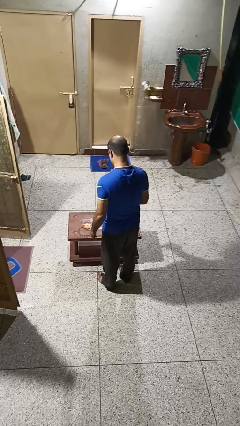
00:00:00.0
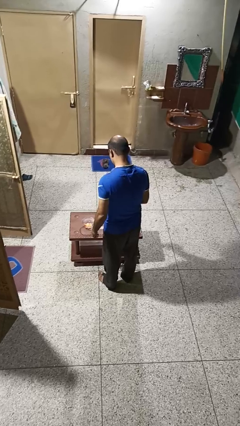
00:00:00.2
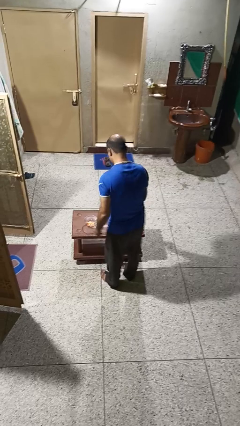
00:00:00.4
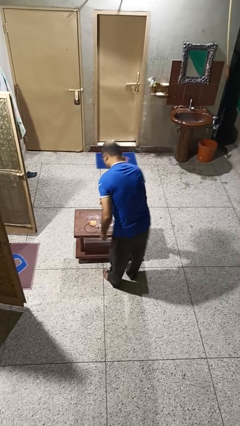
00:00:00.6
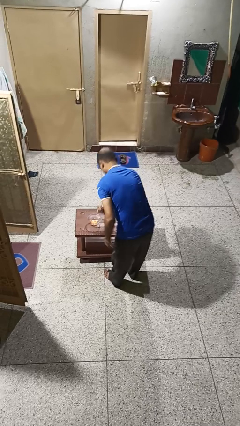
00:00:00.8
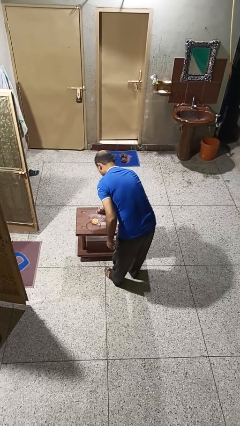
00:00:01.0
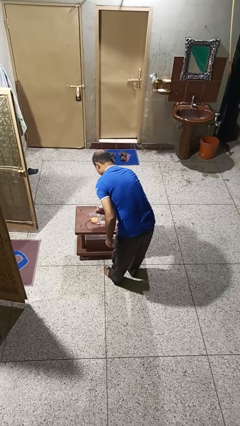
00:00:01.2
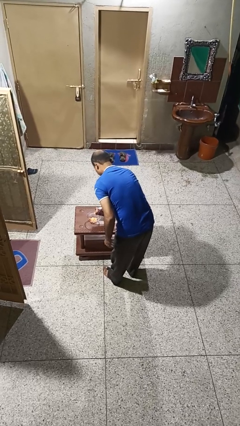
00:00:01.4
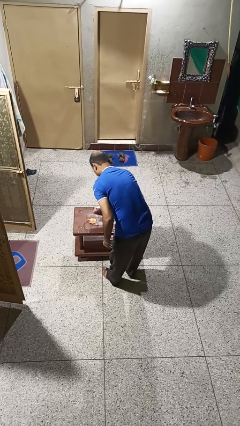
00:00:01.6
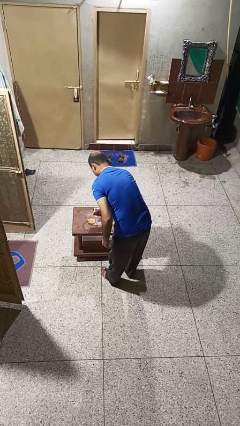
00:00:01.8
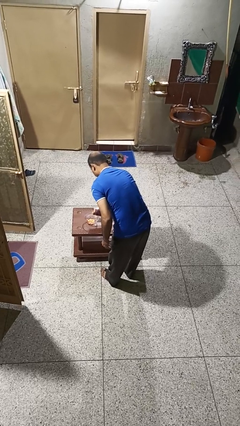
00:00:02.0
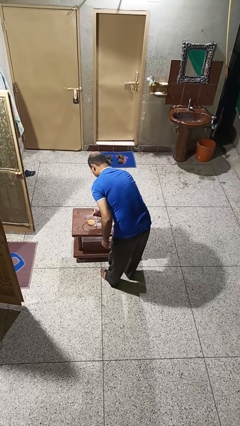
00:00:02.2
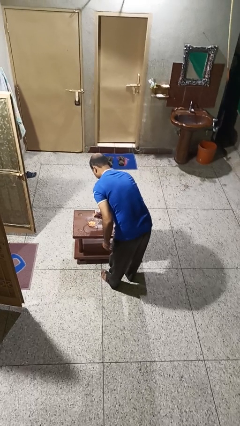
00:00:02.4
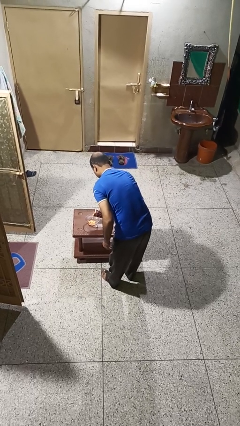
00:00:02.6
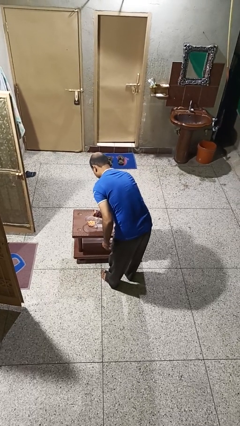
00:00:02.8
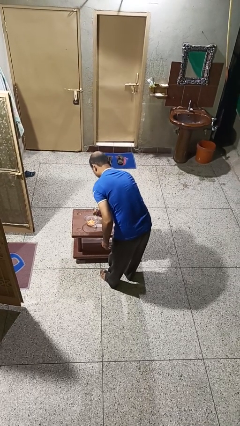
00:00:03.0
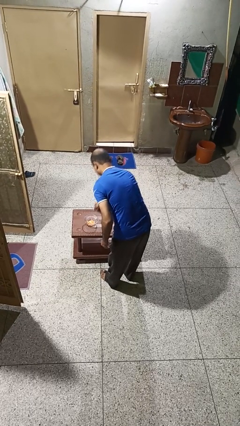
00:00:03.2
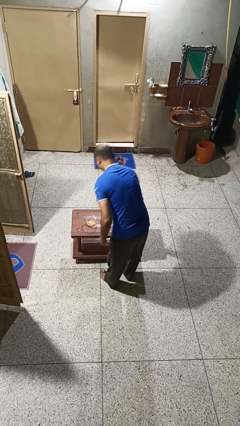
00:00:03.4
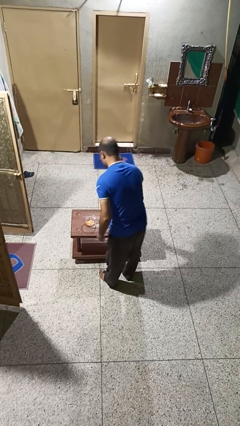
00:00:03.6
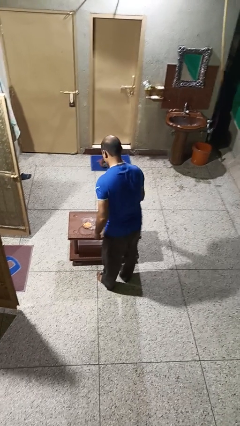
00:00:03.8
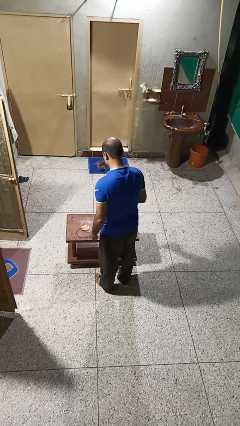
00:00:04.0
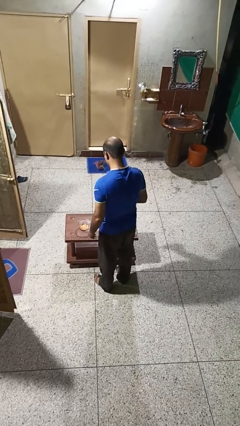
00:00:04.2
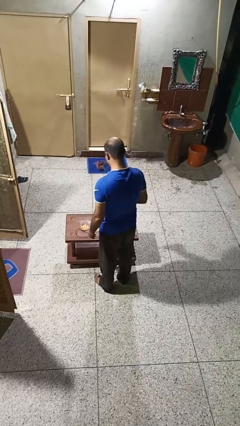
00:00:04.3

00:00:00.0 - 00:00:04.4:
person pours into bowl

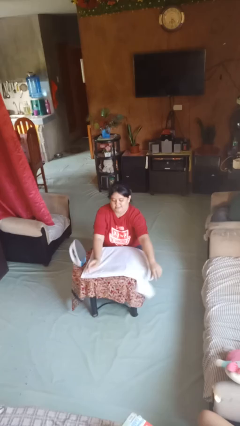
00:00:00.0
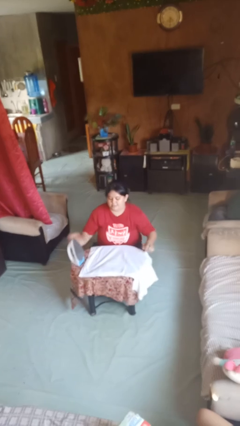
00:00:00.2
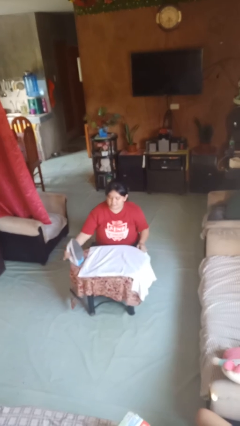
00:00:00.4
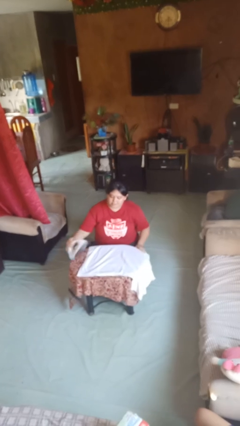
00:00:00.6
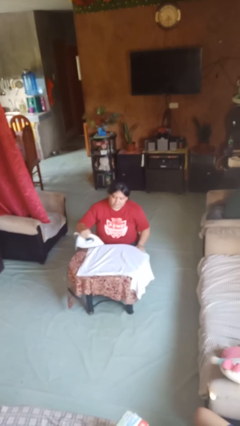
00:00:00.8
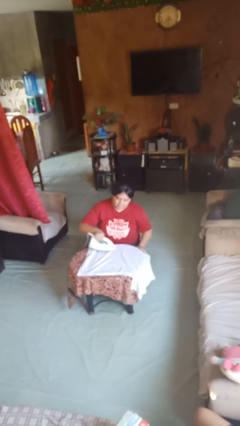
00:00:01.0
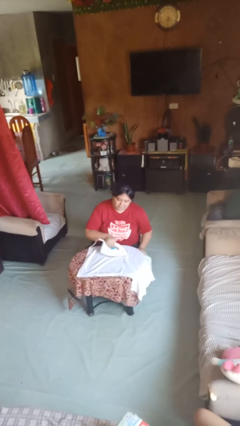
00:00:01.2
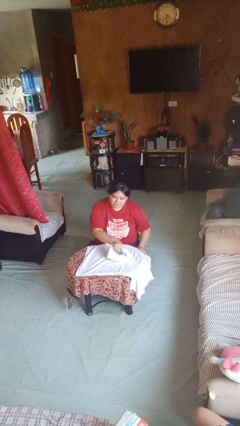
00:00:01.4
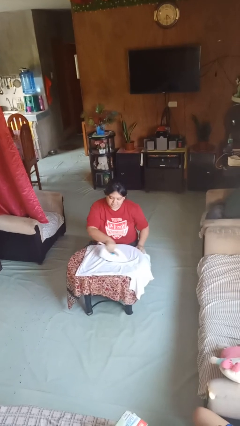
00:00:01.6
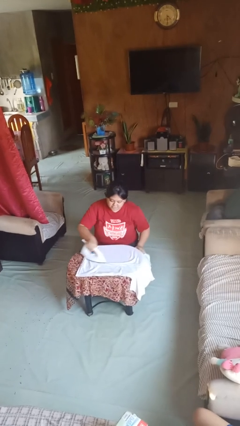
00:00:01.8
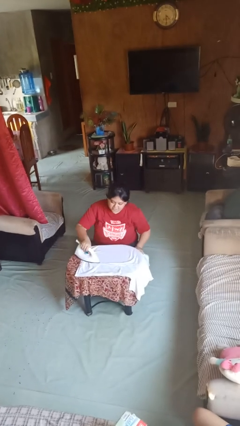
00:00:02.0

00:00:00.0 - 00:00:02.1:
person irons clothes

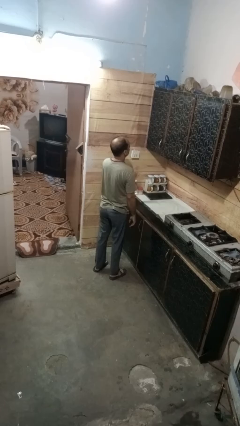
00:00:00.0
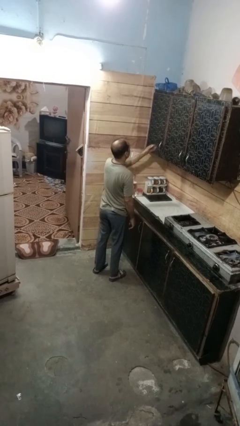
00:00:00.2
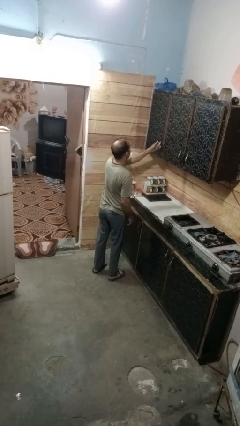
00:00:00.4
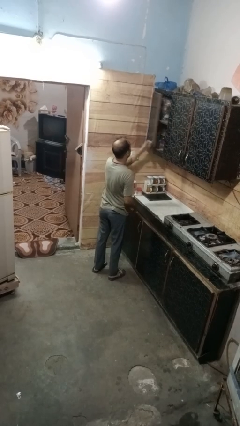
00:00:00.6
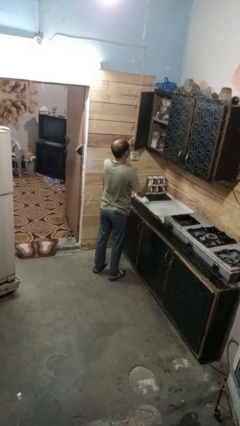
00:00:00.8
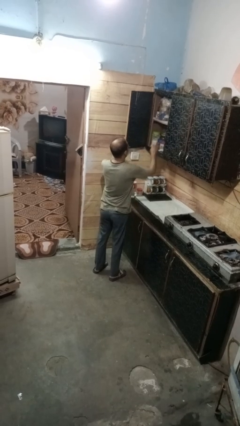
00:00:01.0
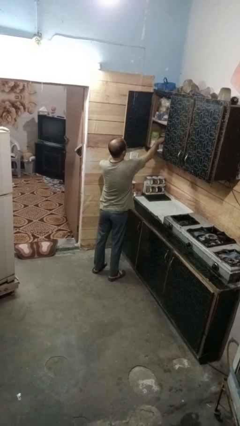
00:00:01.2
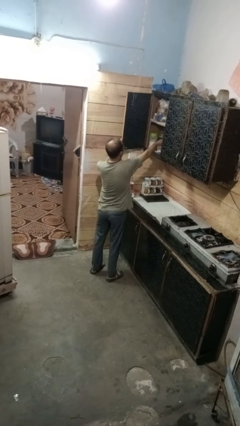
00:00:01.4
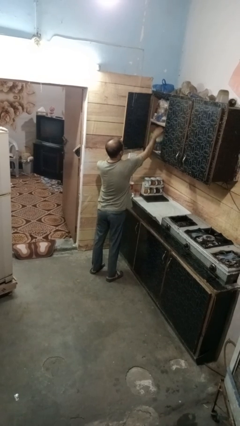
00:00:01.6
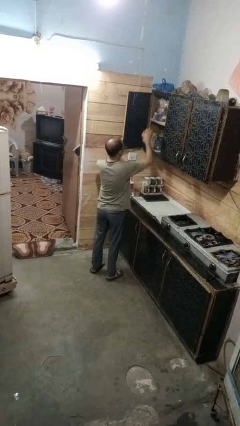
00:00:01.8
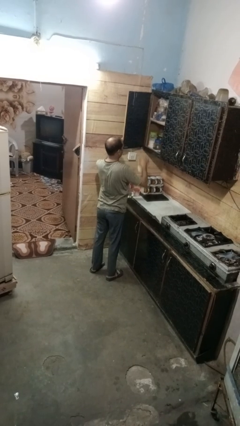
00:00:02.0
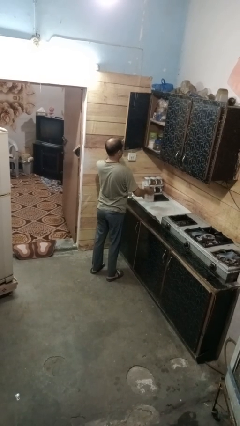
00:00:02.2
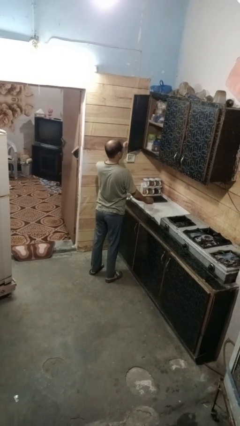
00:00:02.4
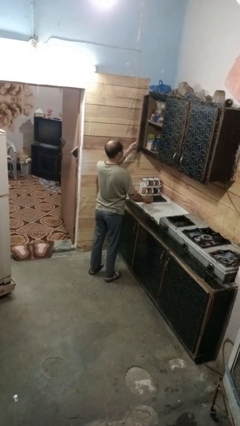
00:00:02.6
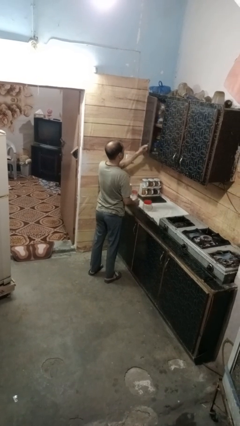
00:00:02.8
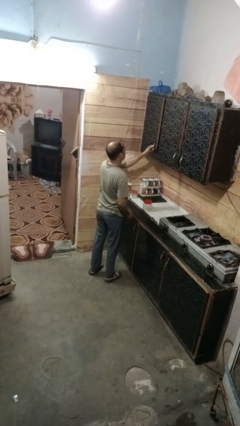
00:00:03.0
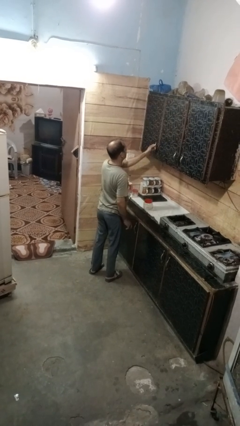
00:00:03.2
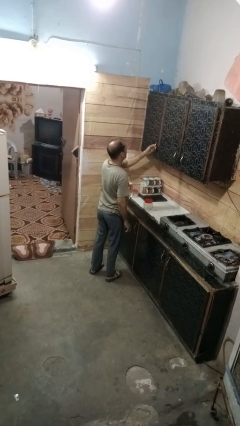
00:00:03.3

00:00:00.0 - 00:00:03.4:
person takes object from cabinet

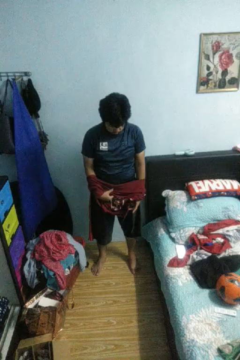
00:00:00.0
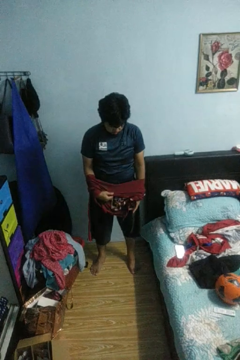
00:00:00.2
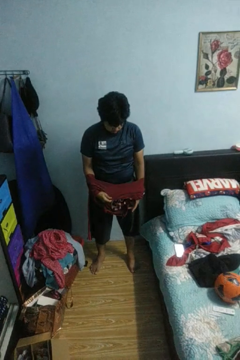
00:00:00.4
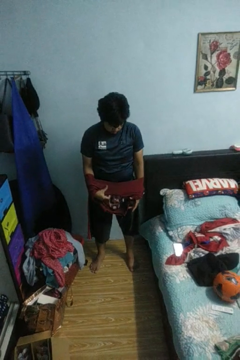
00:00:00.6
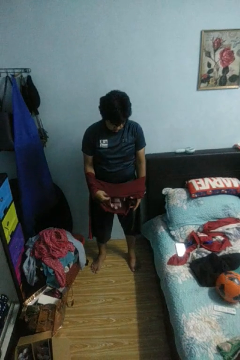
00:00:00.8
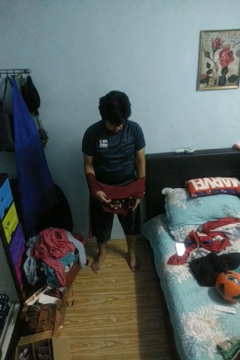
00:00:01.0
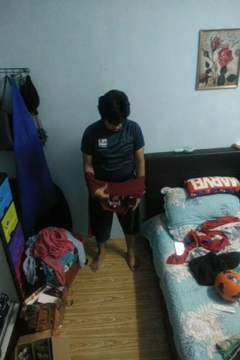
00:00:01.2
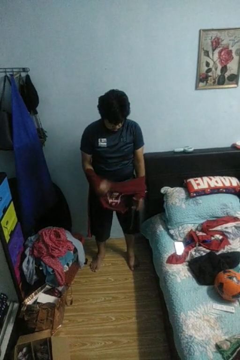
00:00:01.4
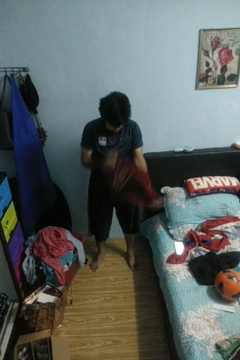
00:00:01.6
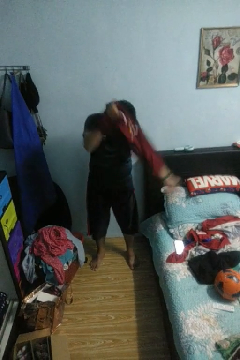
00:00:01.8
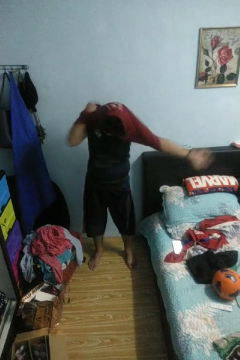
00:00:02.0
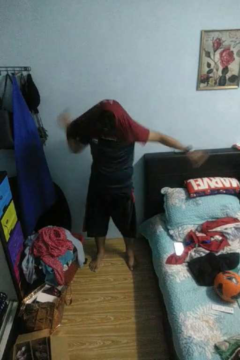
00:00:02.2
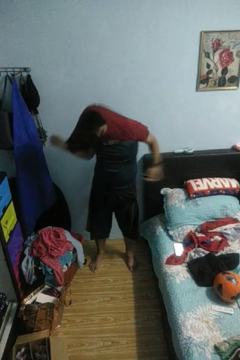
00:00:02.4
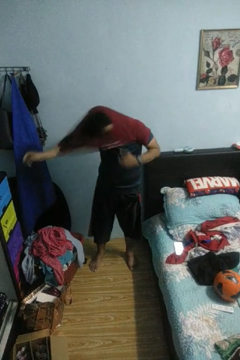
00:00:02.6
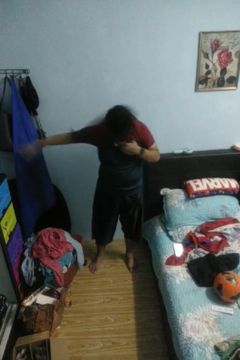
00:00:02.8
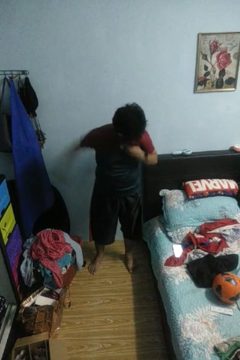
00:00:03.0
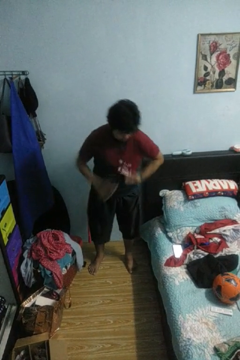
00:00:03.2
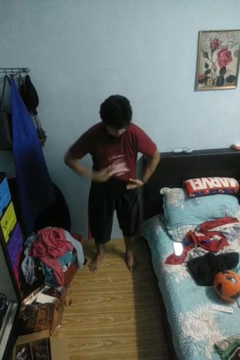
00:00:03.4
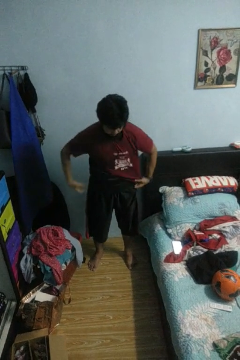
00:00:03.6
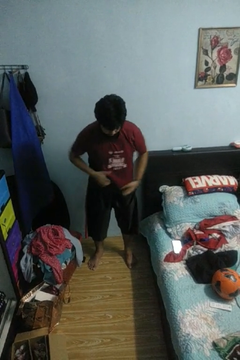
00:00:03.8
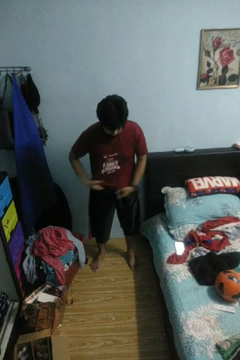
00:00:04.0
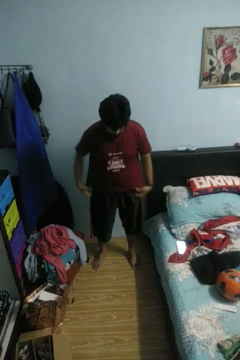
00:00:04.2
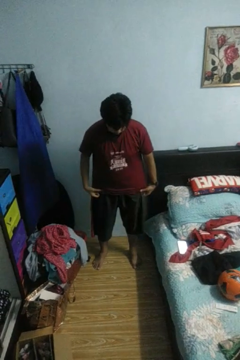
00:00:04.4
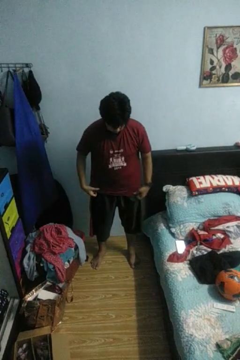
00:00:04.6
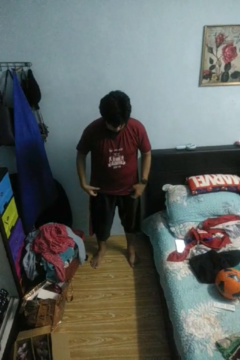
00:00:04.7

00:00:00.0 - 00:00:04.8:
person puts on shirt

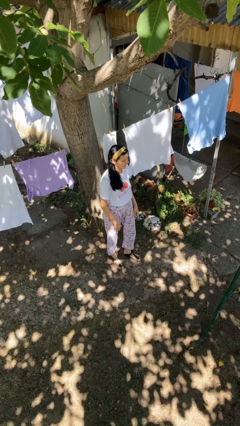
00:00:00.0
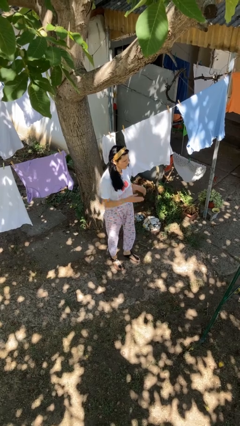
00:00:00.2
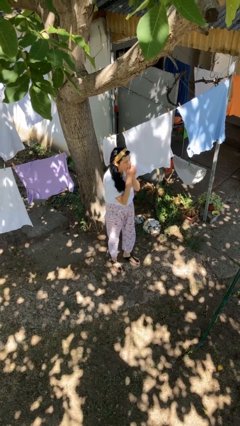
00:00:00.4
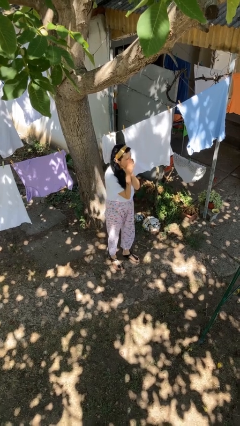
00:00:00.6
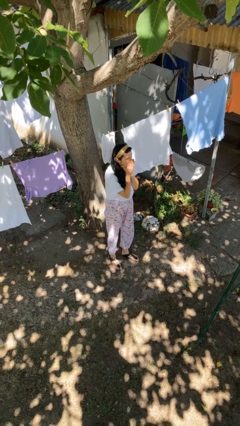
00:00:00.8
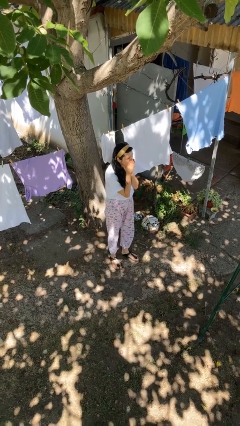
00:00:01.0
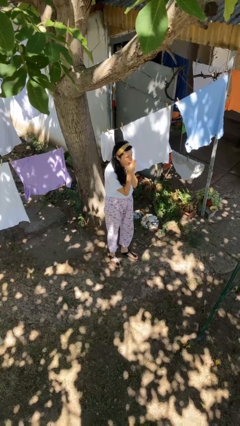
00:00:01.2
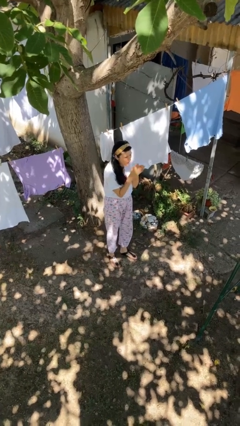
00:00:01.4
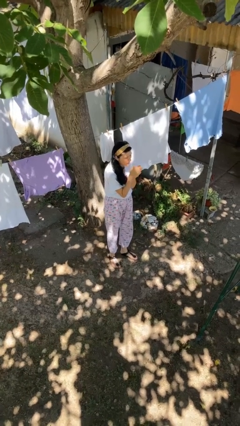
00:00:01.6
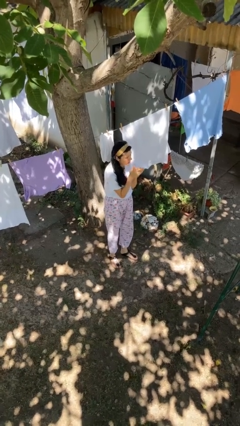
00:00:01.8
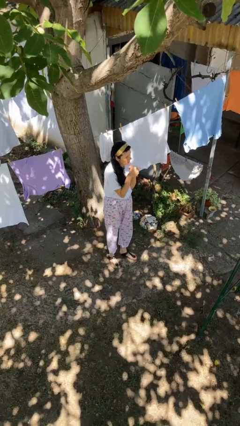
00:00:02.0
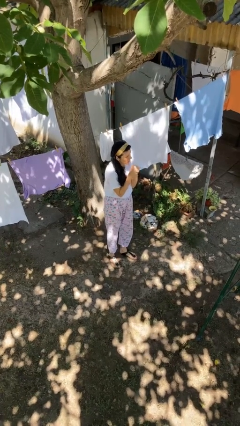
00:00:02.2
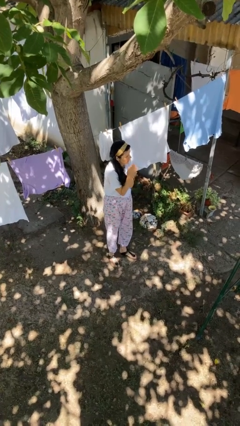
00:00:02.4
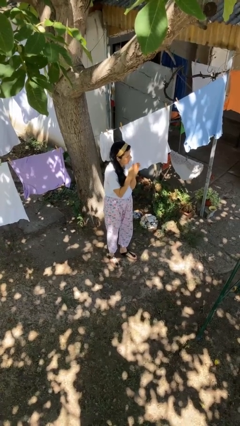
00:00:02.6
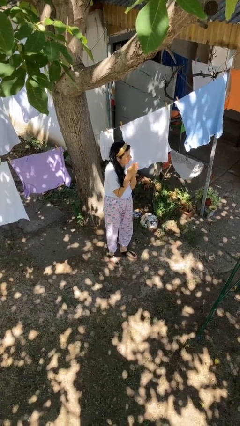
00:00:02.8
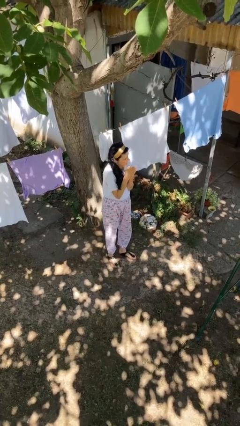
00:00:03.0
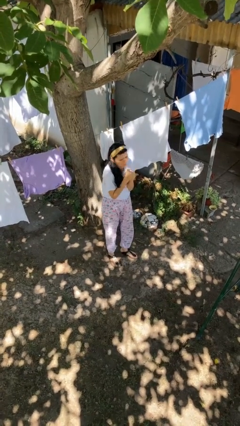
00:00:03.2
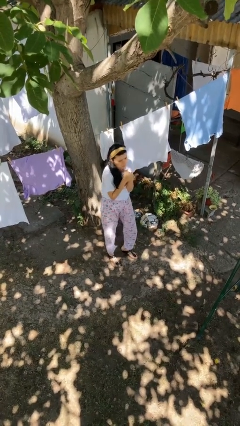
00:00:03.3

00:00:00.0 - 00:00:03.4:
person blows into hands

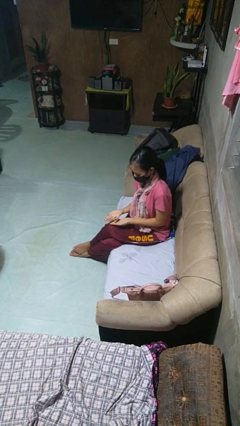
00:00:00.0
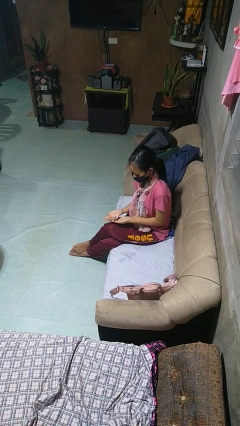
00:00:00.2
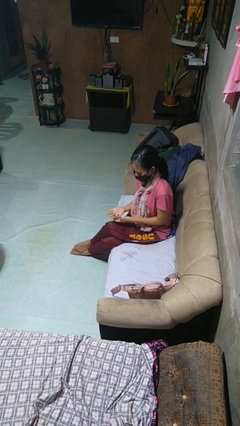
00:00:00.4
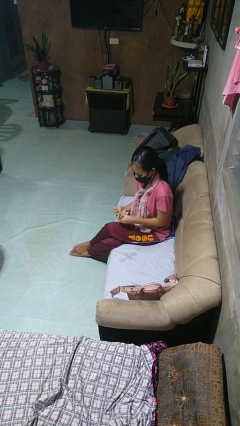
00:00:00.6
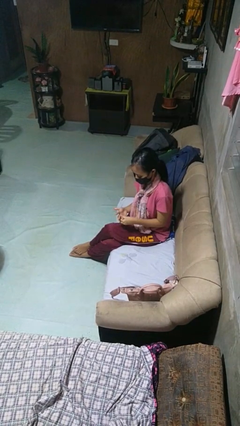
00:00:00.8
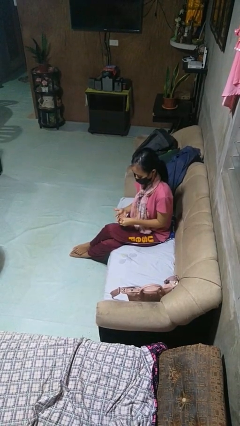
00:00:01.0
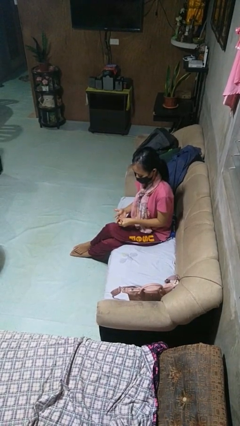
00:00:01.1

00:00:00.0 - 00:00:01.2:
person takes off ring
